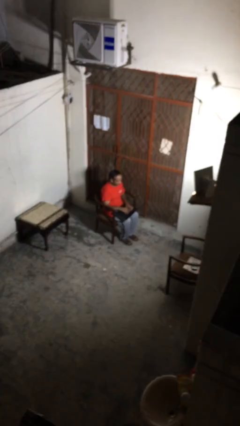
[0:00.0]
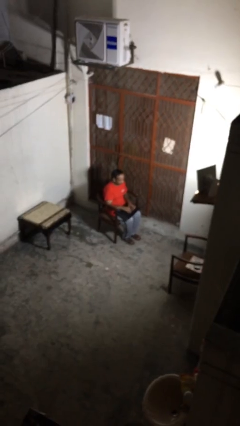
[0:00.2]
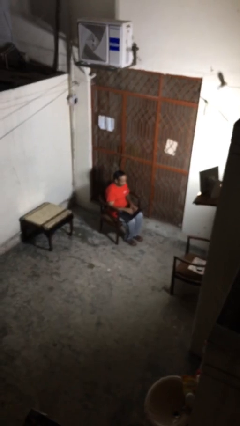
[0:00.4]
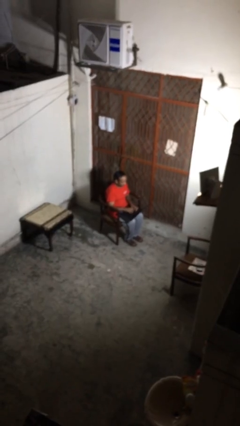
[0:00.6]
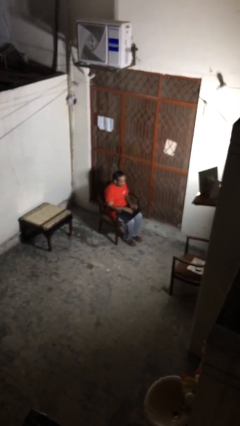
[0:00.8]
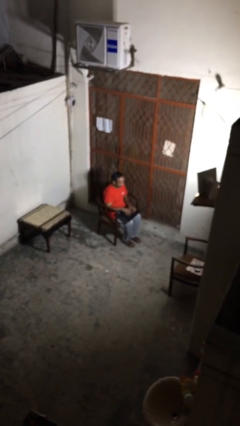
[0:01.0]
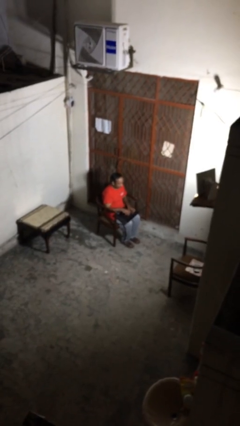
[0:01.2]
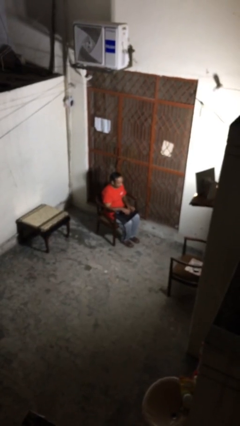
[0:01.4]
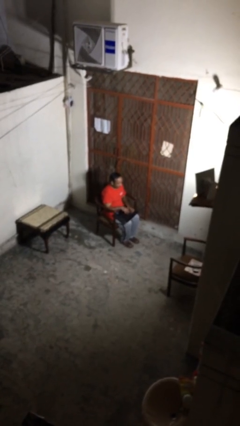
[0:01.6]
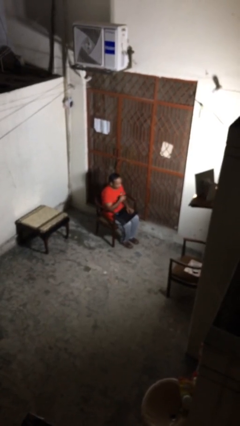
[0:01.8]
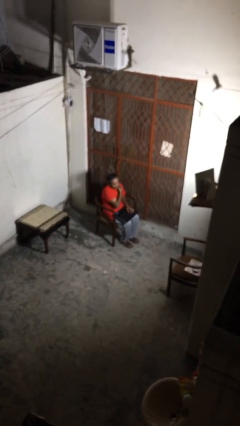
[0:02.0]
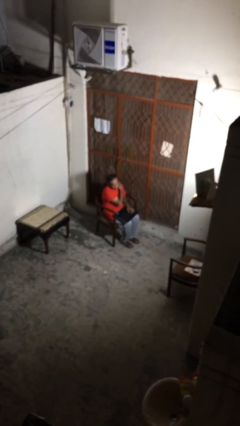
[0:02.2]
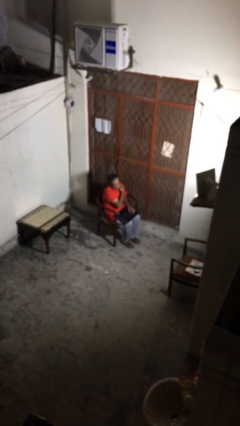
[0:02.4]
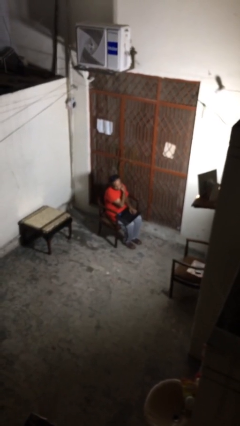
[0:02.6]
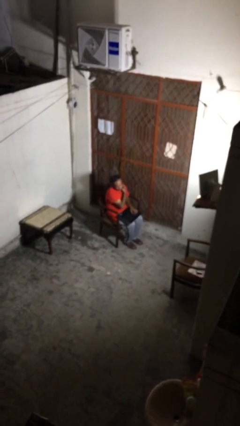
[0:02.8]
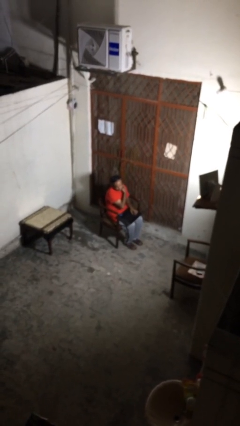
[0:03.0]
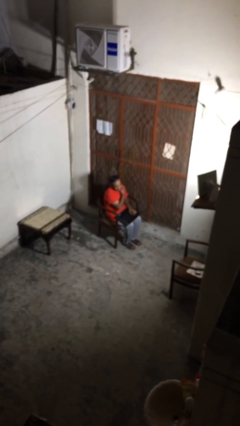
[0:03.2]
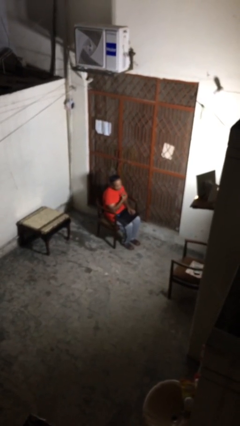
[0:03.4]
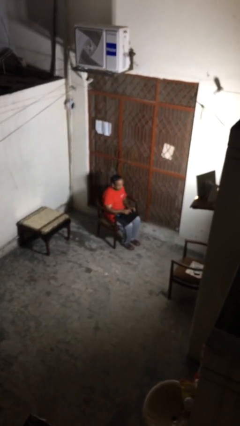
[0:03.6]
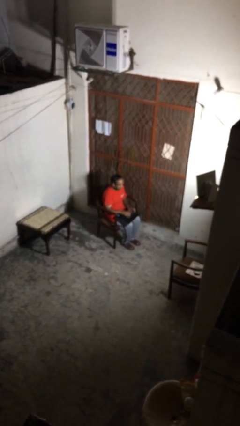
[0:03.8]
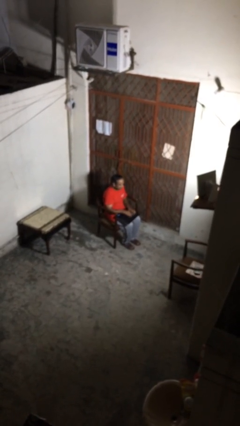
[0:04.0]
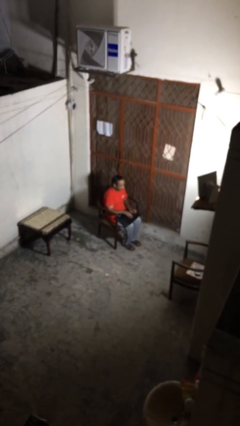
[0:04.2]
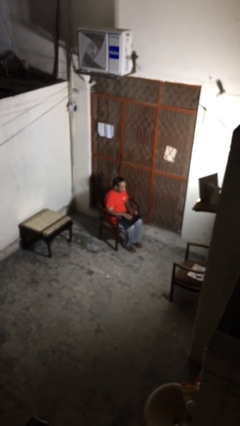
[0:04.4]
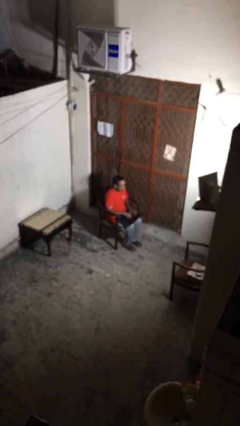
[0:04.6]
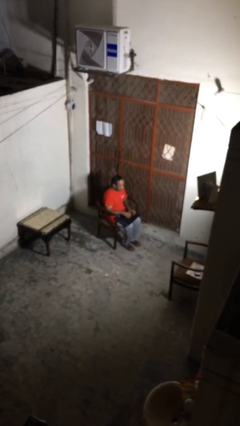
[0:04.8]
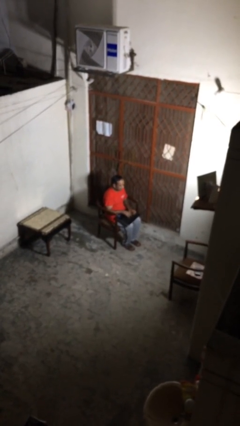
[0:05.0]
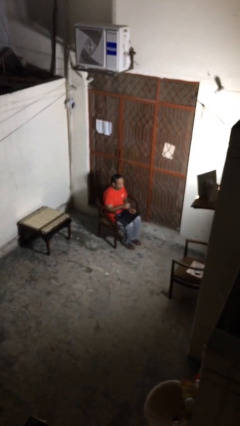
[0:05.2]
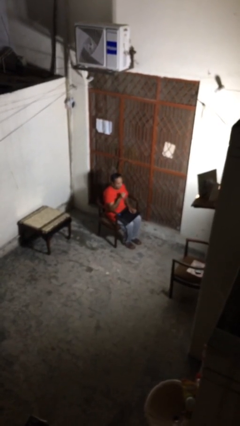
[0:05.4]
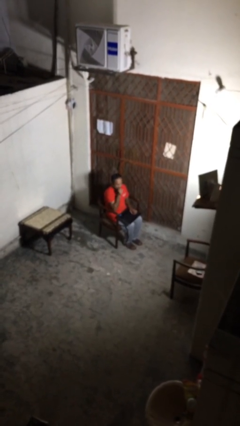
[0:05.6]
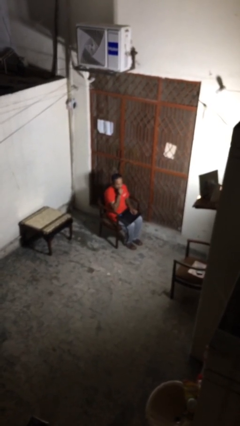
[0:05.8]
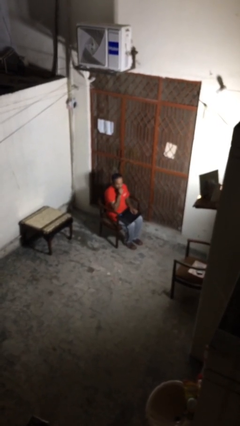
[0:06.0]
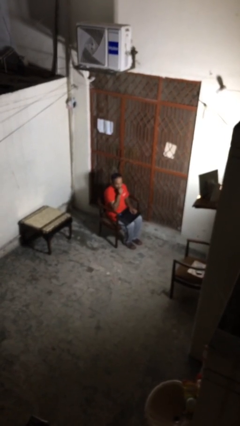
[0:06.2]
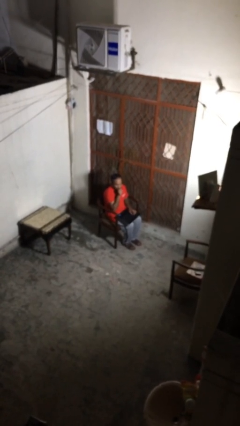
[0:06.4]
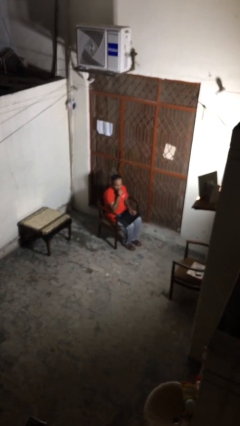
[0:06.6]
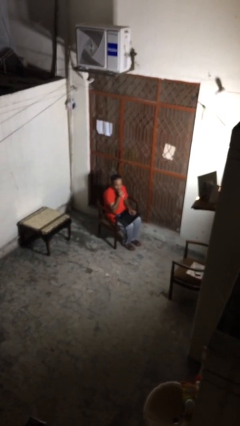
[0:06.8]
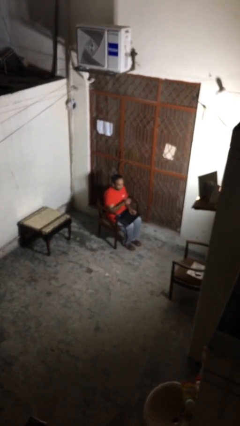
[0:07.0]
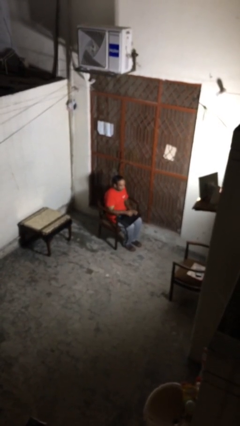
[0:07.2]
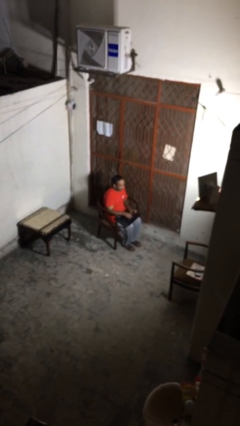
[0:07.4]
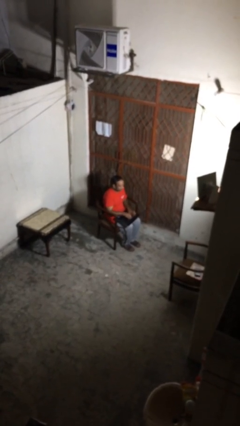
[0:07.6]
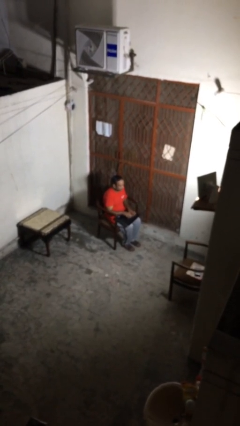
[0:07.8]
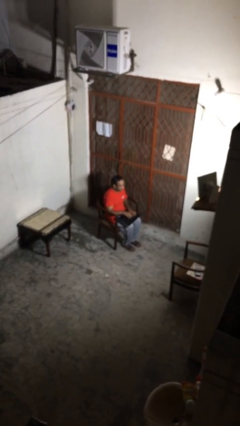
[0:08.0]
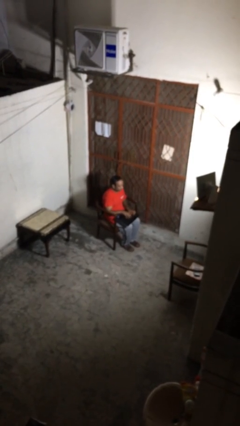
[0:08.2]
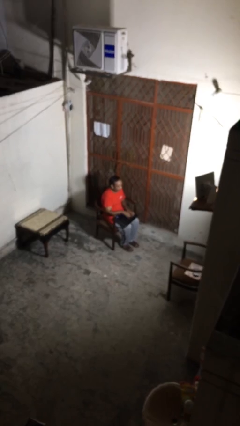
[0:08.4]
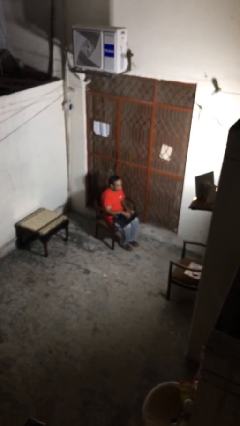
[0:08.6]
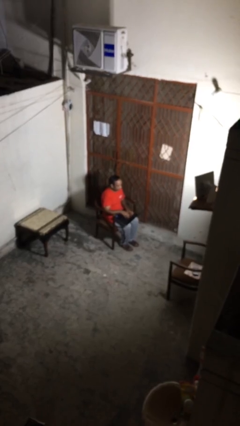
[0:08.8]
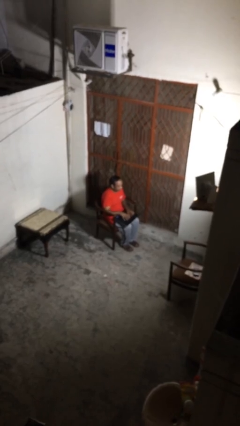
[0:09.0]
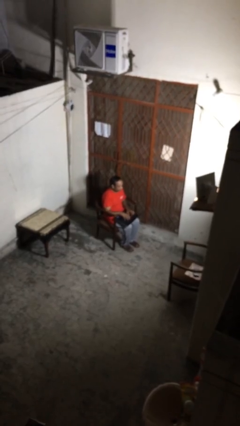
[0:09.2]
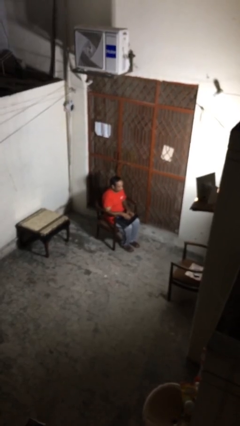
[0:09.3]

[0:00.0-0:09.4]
person interacts with laptop

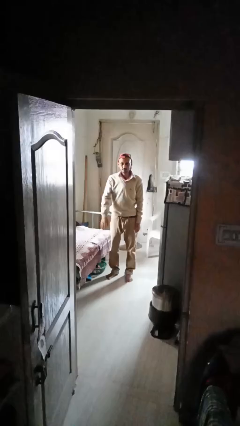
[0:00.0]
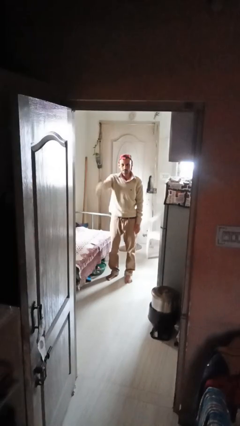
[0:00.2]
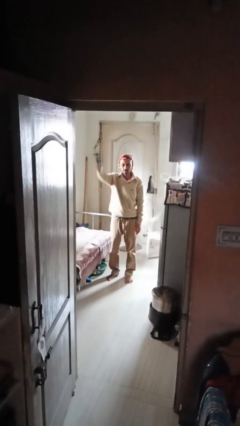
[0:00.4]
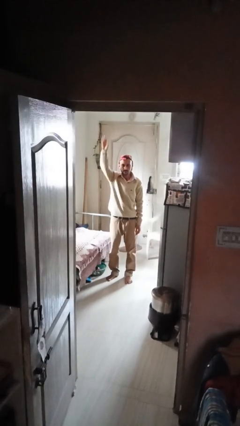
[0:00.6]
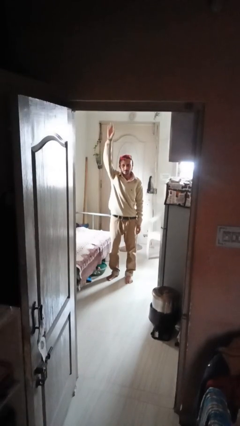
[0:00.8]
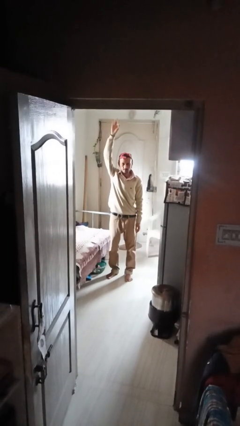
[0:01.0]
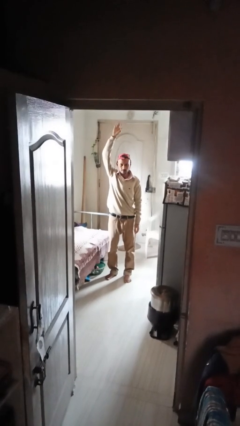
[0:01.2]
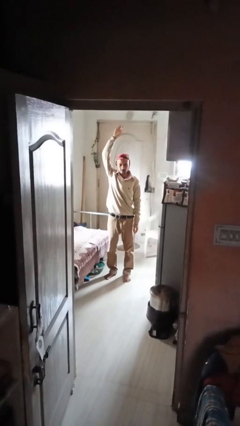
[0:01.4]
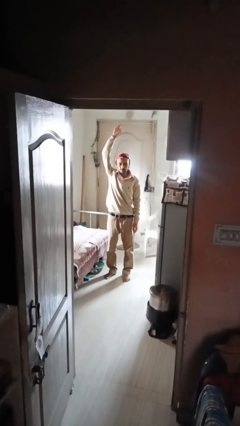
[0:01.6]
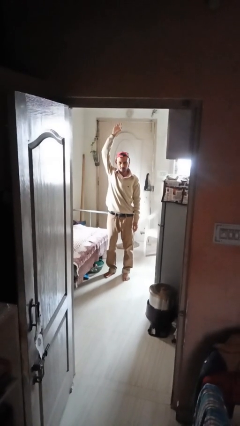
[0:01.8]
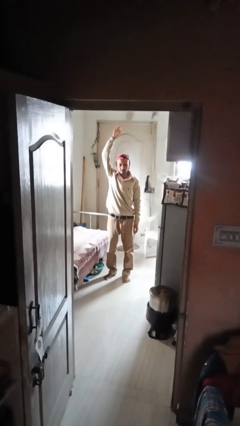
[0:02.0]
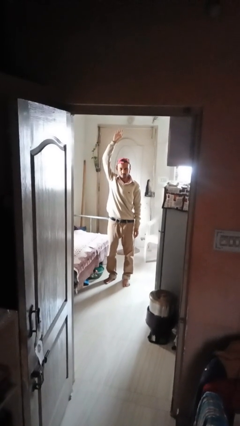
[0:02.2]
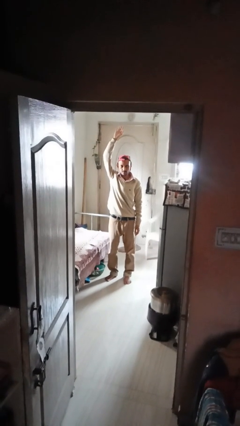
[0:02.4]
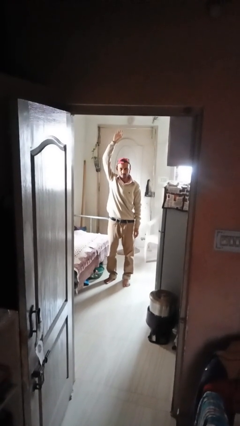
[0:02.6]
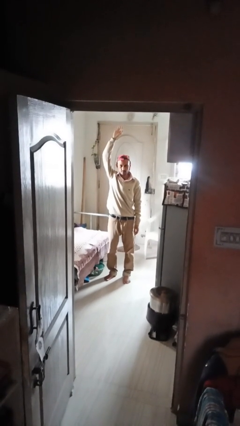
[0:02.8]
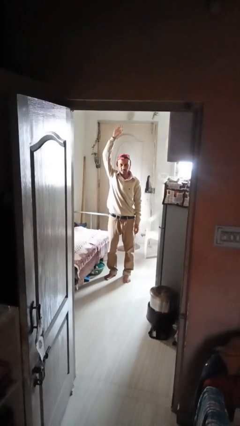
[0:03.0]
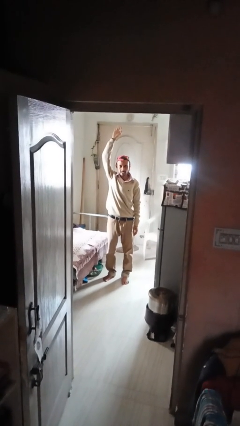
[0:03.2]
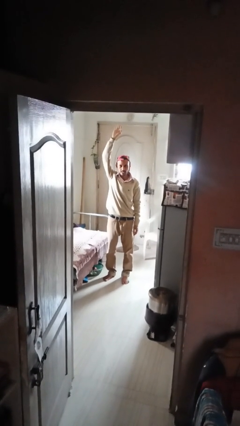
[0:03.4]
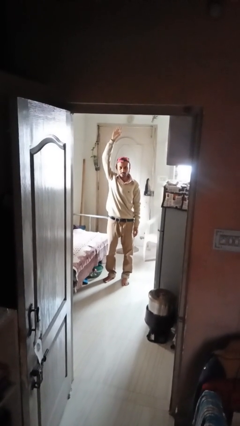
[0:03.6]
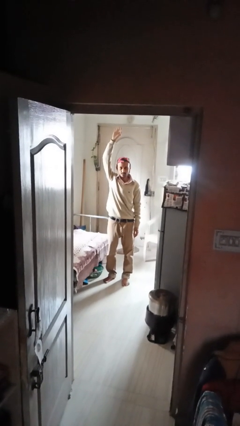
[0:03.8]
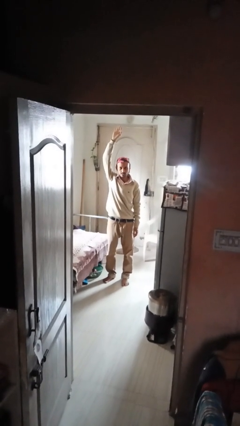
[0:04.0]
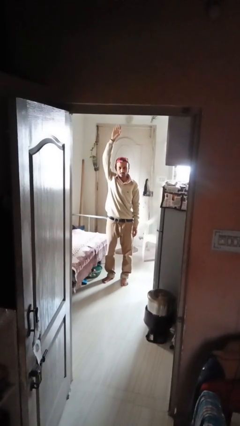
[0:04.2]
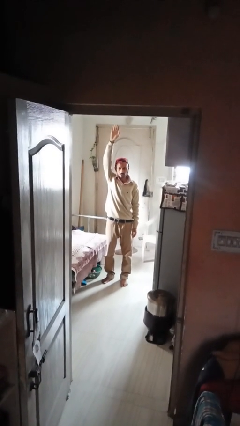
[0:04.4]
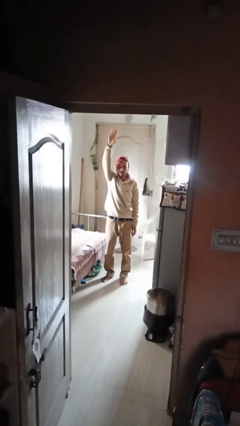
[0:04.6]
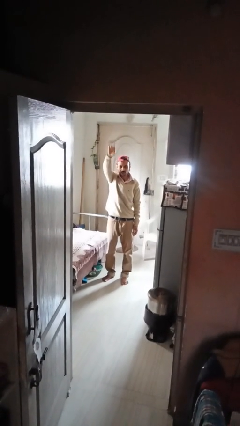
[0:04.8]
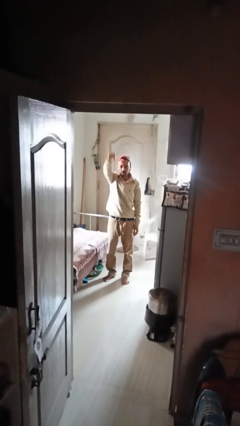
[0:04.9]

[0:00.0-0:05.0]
person gestures raise hand

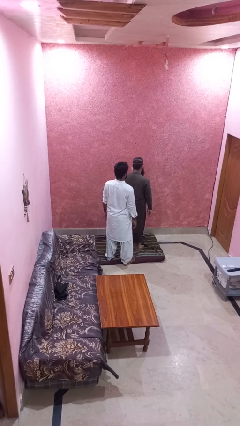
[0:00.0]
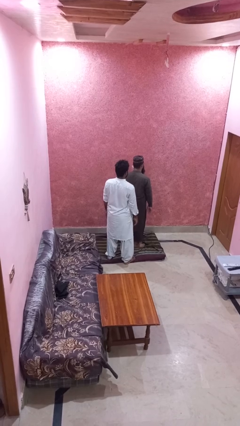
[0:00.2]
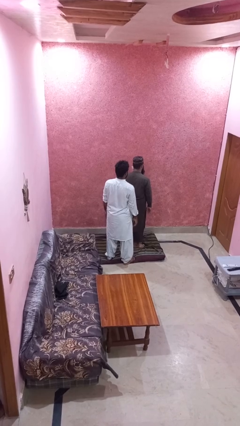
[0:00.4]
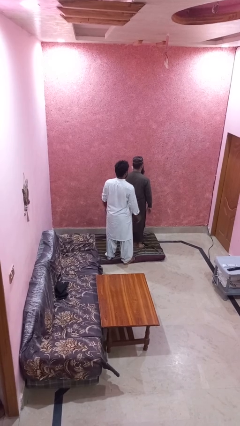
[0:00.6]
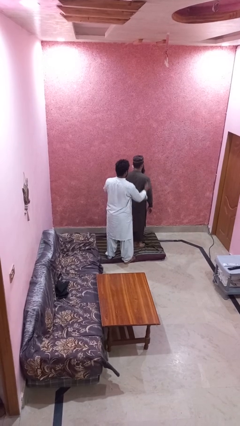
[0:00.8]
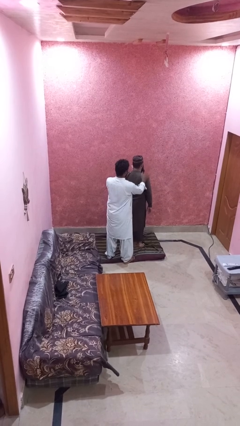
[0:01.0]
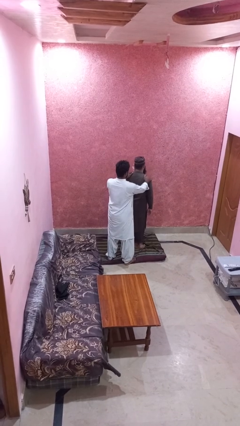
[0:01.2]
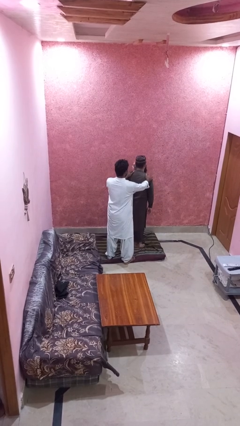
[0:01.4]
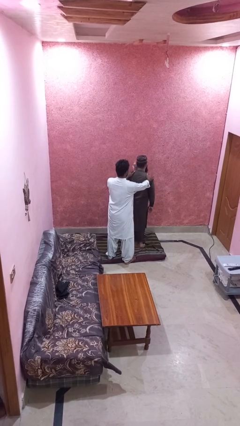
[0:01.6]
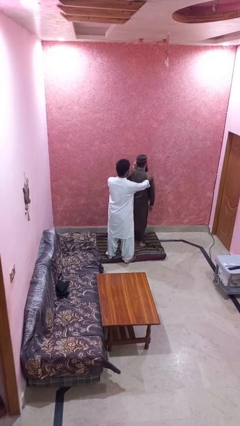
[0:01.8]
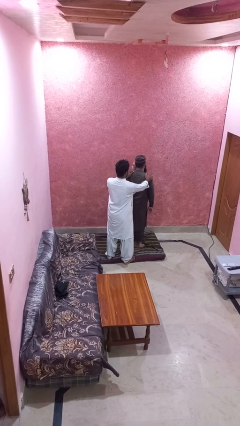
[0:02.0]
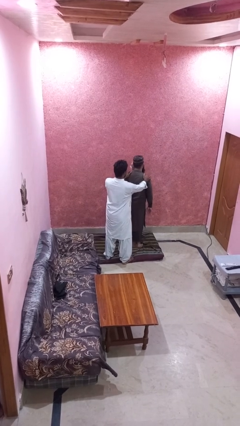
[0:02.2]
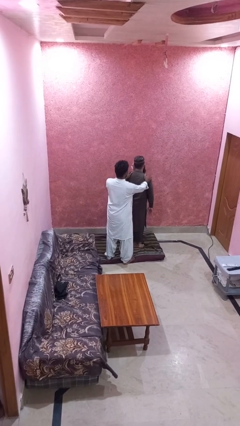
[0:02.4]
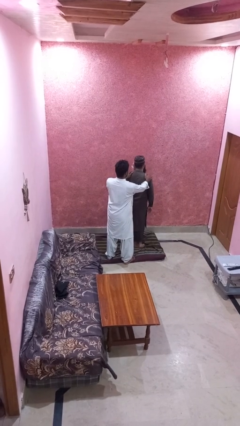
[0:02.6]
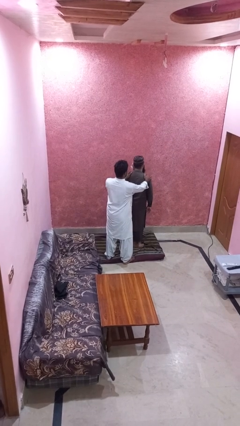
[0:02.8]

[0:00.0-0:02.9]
person grabs person by shoulder

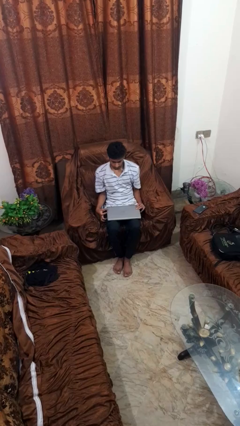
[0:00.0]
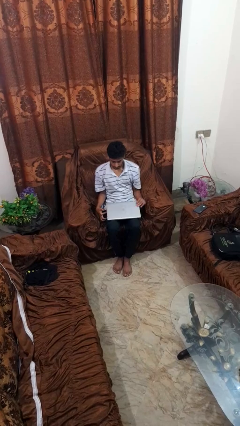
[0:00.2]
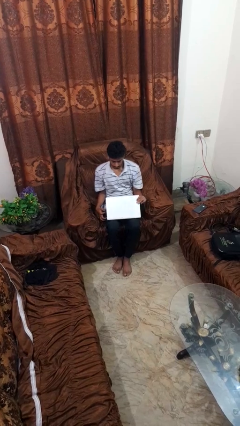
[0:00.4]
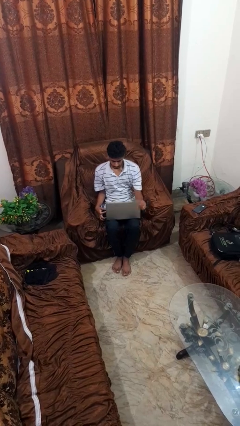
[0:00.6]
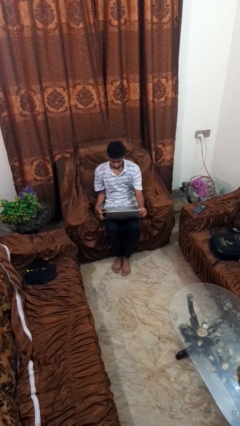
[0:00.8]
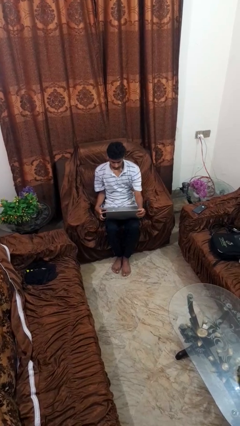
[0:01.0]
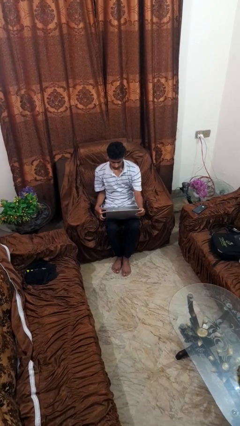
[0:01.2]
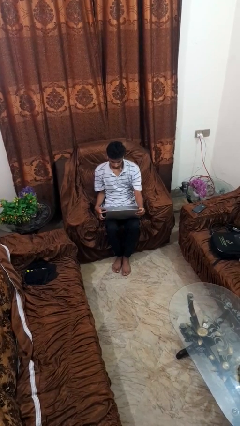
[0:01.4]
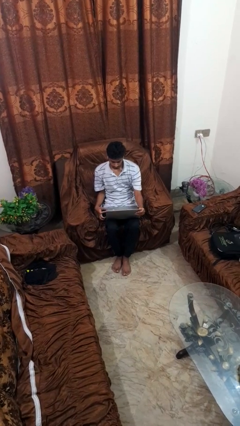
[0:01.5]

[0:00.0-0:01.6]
person opens laptop
